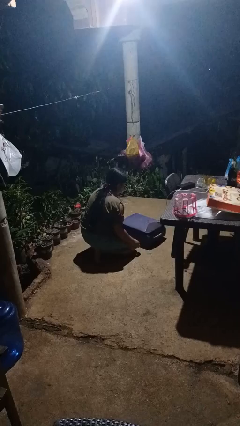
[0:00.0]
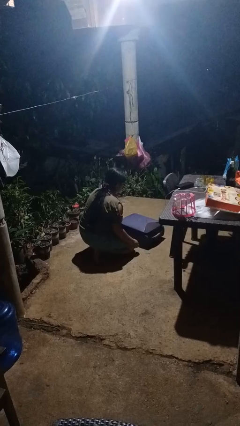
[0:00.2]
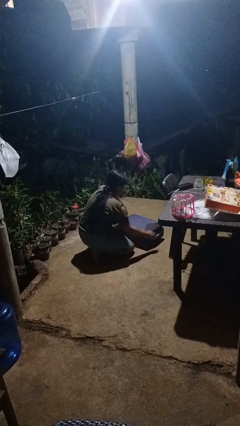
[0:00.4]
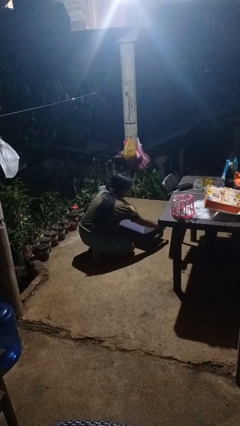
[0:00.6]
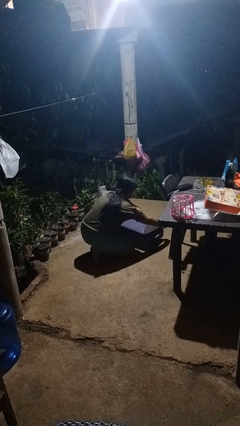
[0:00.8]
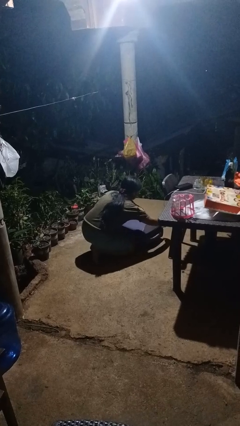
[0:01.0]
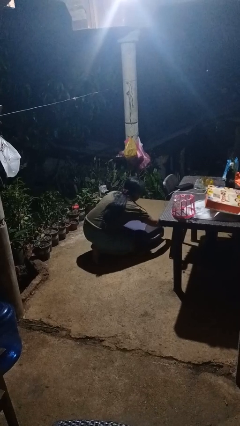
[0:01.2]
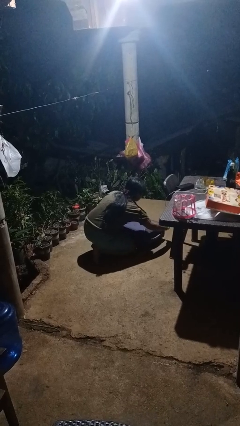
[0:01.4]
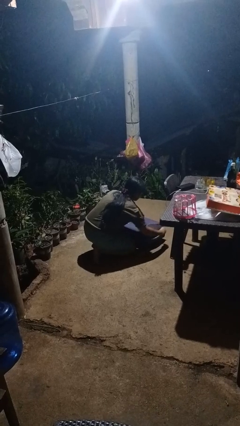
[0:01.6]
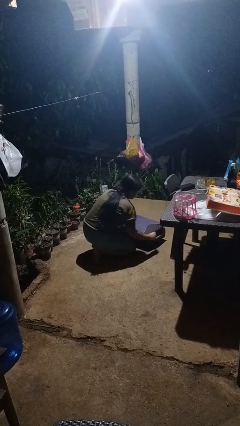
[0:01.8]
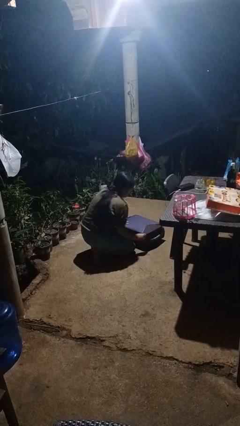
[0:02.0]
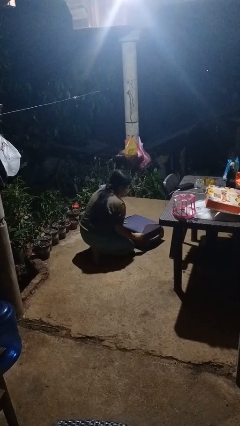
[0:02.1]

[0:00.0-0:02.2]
person closes suitcase

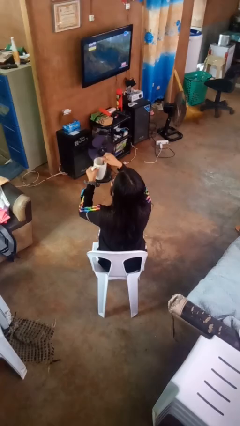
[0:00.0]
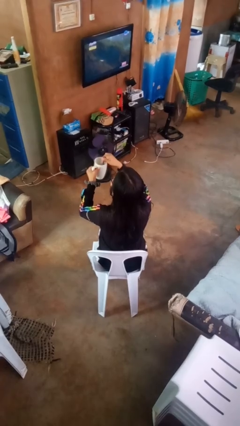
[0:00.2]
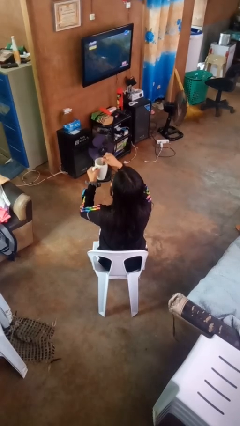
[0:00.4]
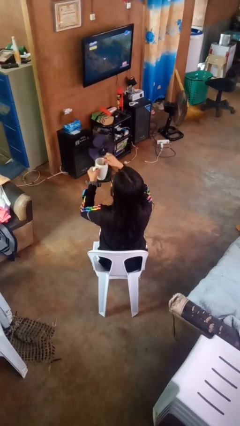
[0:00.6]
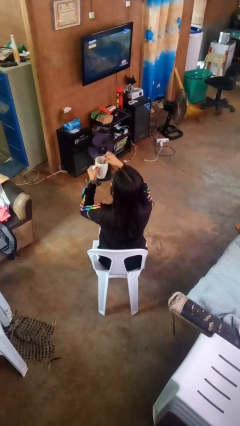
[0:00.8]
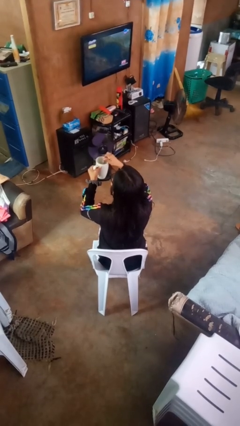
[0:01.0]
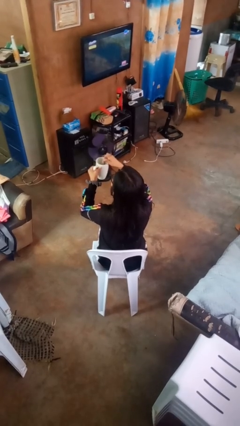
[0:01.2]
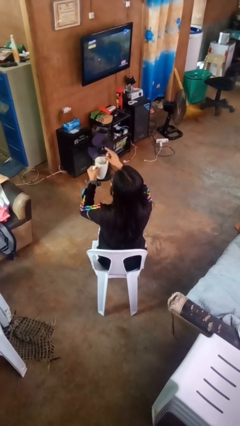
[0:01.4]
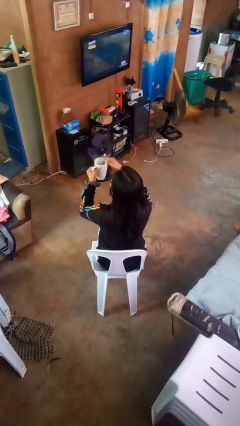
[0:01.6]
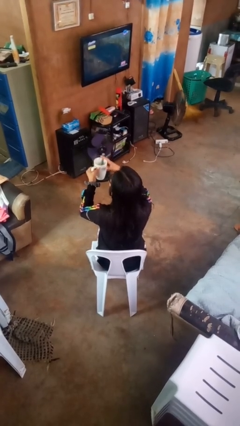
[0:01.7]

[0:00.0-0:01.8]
person stirs mug

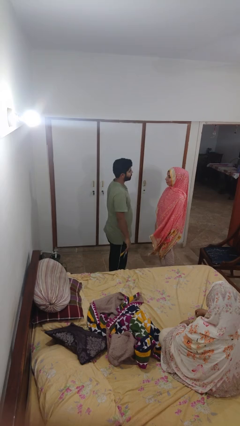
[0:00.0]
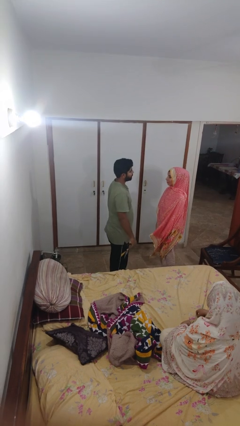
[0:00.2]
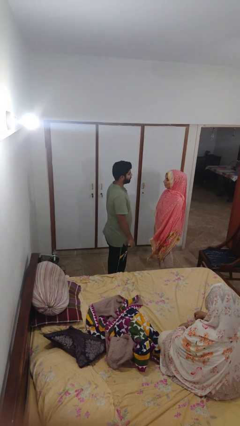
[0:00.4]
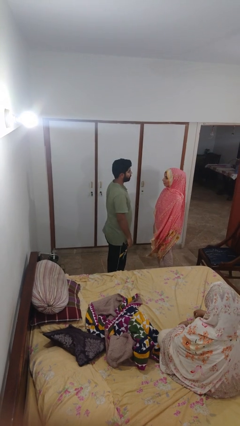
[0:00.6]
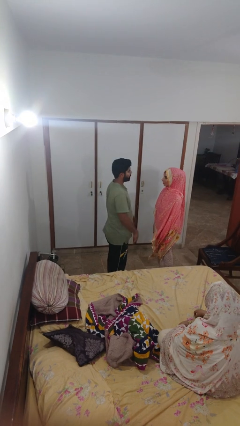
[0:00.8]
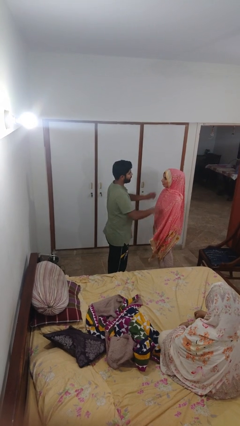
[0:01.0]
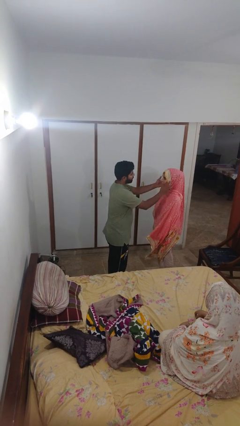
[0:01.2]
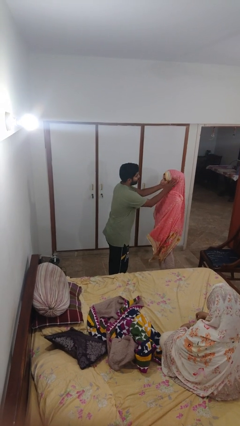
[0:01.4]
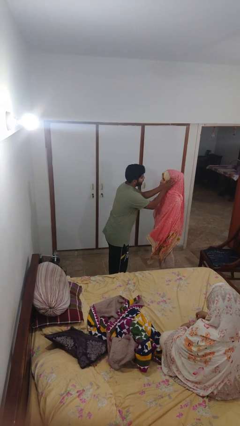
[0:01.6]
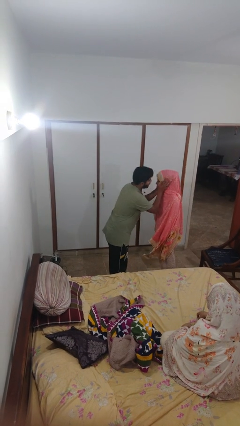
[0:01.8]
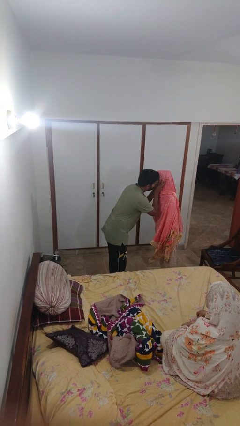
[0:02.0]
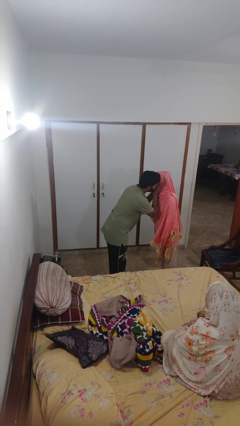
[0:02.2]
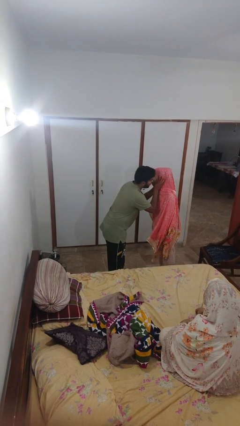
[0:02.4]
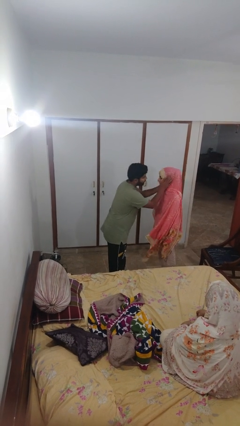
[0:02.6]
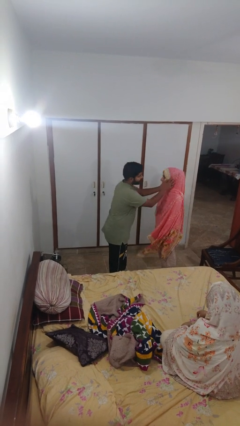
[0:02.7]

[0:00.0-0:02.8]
person kisses cheek of person

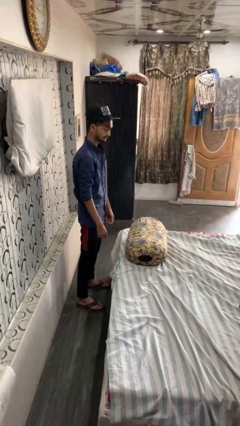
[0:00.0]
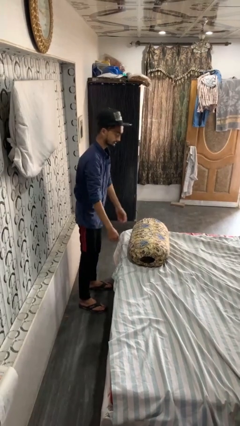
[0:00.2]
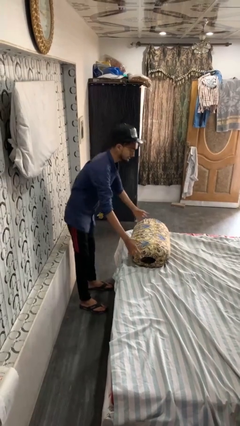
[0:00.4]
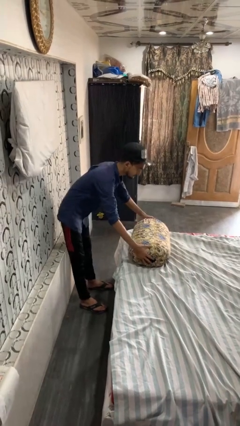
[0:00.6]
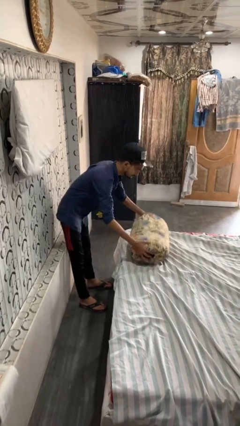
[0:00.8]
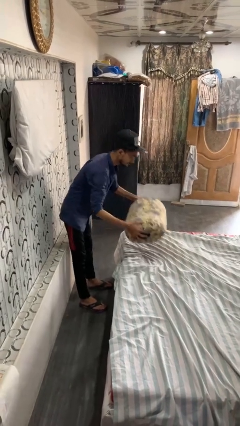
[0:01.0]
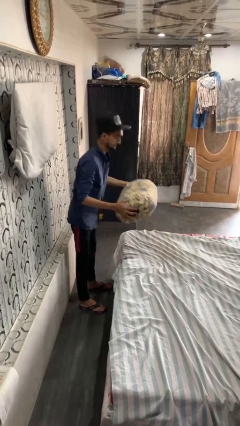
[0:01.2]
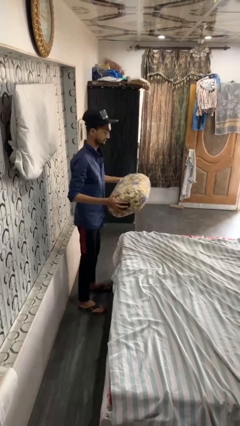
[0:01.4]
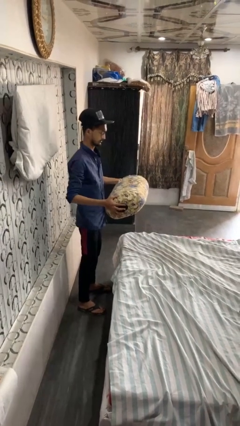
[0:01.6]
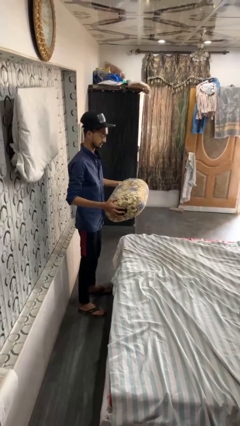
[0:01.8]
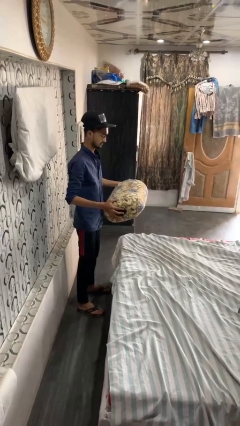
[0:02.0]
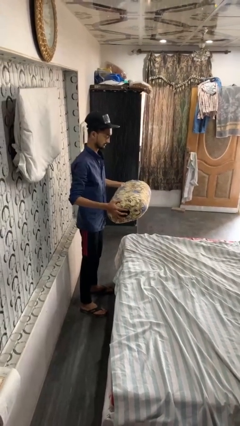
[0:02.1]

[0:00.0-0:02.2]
person picks up object from bed

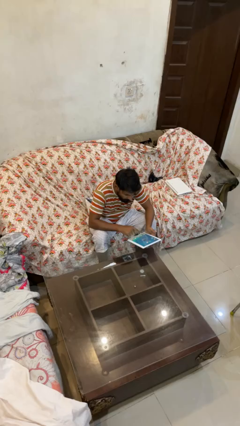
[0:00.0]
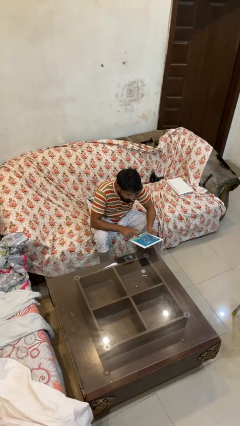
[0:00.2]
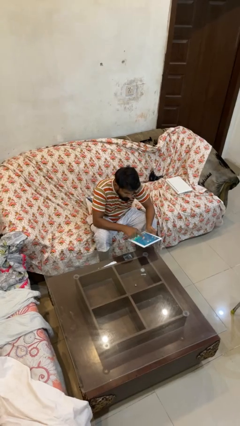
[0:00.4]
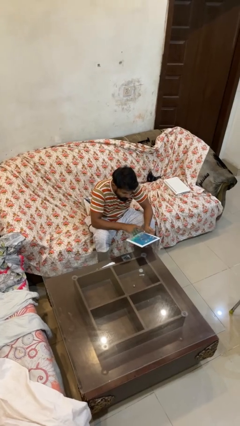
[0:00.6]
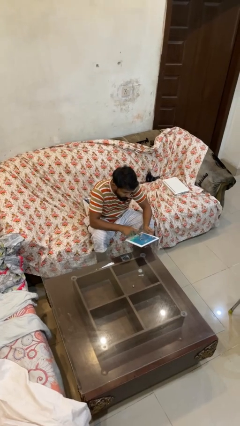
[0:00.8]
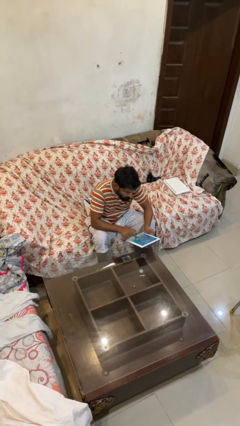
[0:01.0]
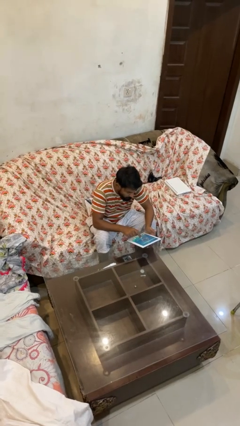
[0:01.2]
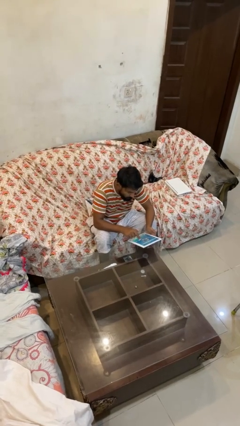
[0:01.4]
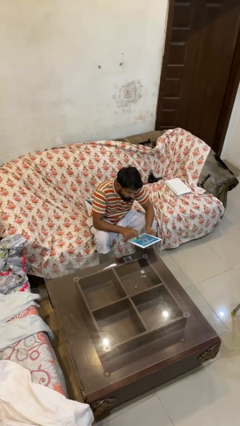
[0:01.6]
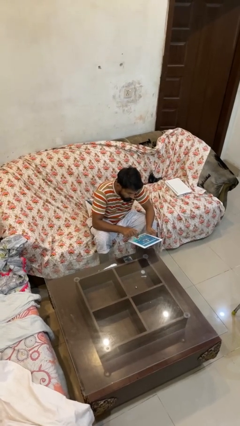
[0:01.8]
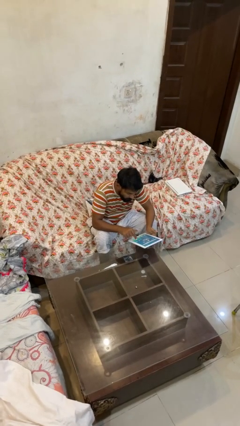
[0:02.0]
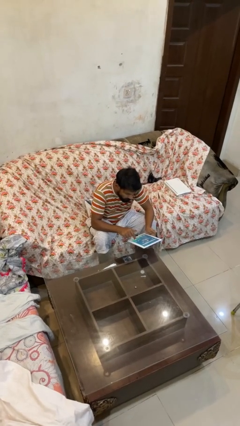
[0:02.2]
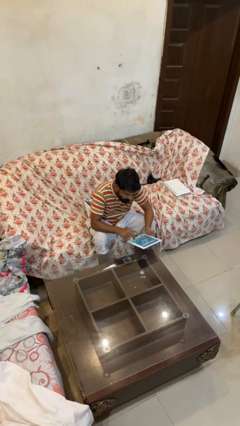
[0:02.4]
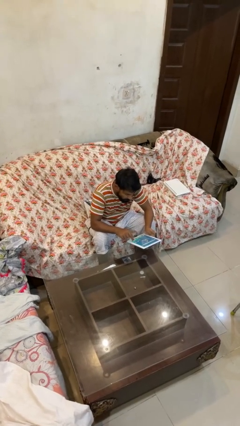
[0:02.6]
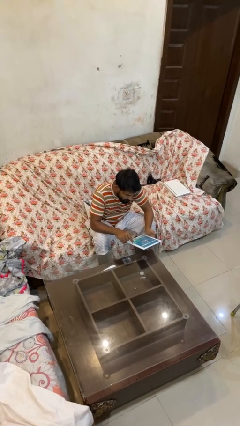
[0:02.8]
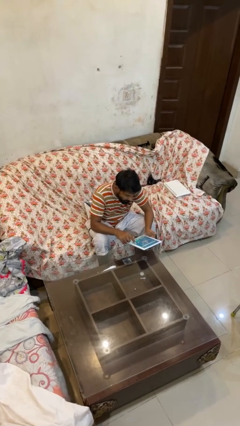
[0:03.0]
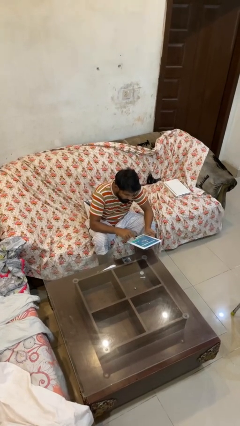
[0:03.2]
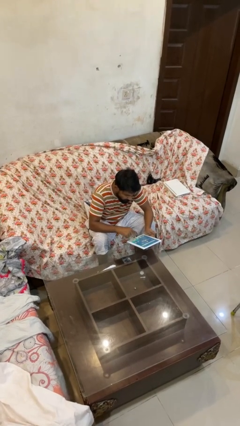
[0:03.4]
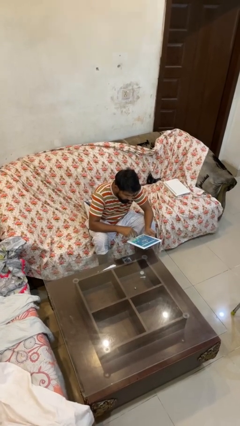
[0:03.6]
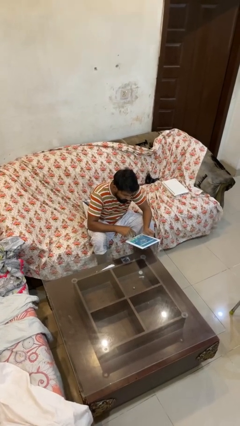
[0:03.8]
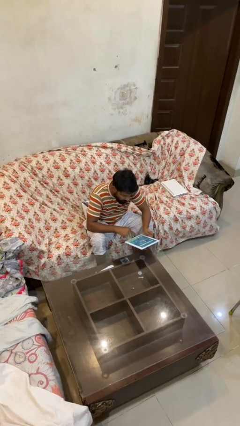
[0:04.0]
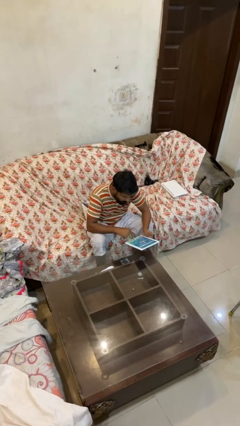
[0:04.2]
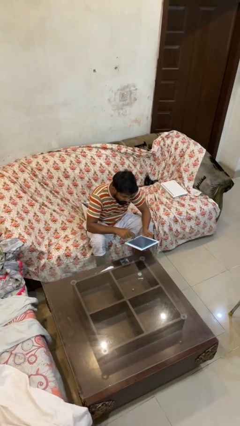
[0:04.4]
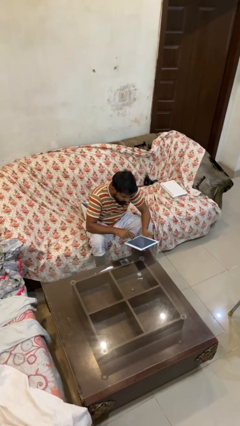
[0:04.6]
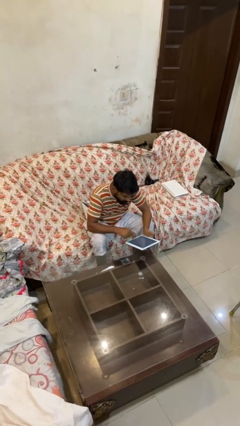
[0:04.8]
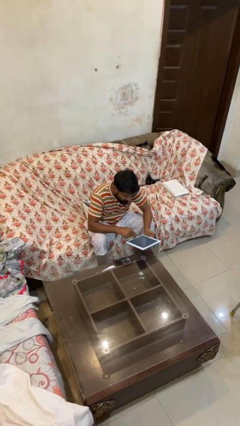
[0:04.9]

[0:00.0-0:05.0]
person interacts with tablet

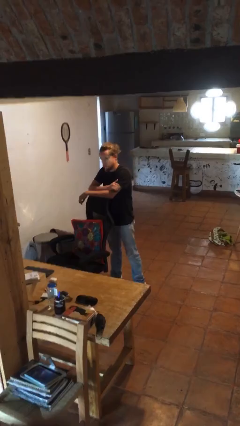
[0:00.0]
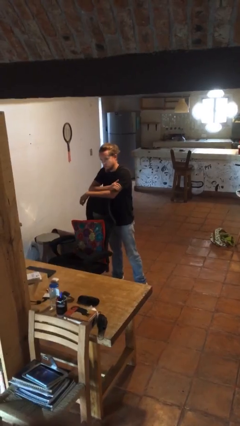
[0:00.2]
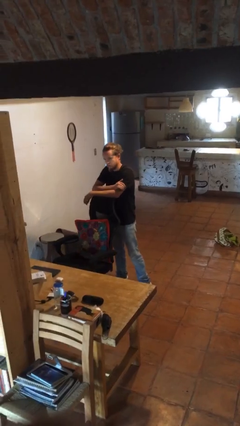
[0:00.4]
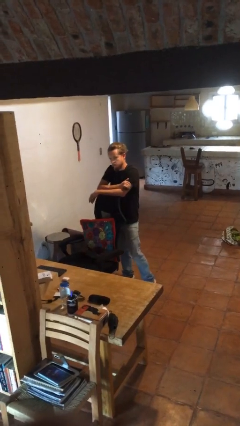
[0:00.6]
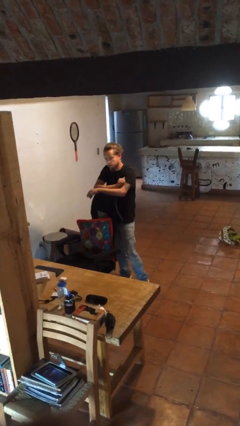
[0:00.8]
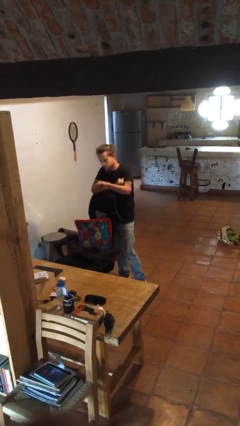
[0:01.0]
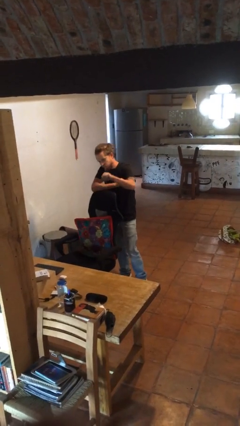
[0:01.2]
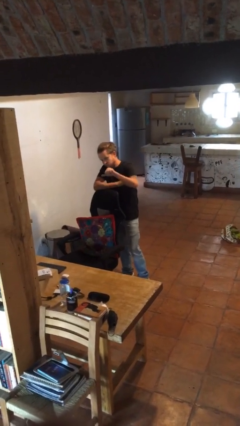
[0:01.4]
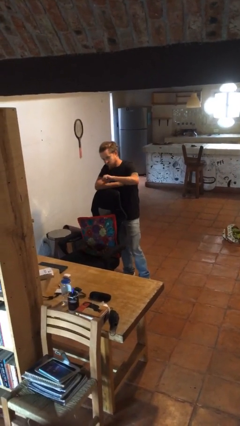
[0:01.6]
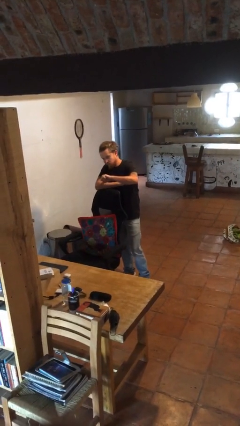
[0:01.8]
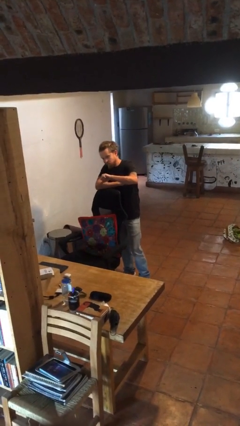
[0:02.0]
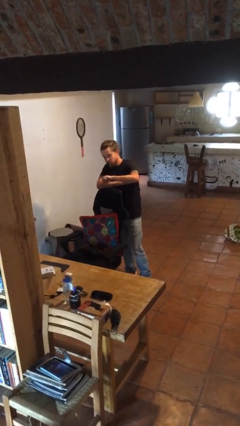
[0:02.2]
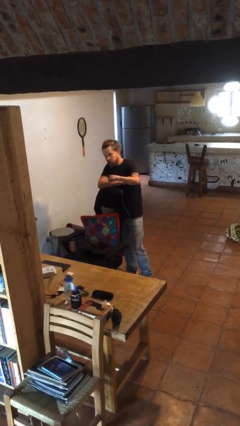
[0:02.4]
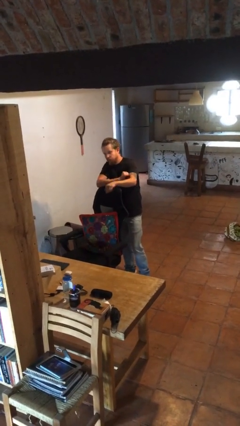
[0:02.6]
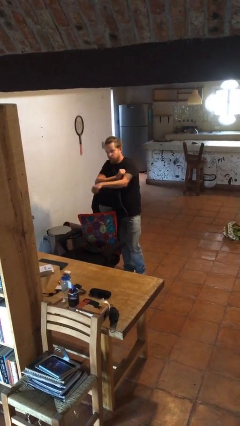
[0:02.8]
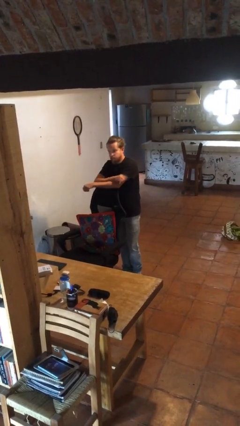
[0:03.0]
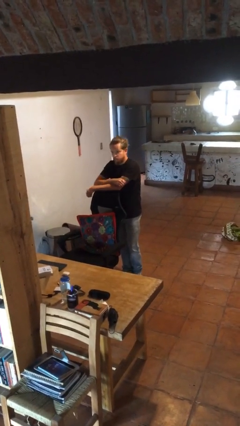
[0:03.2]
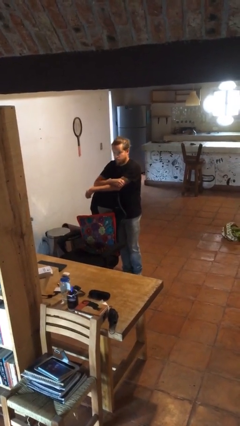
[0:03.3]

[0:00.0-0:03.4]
person gestures thumbs down
